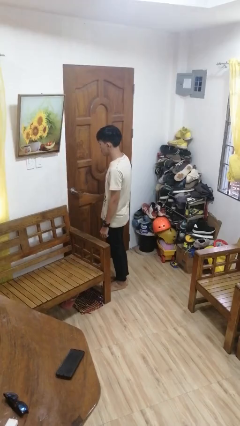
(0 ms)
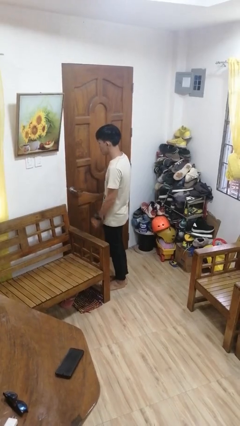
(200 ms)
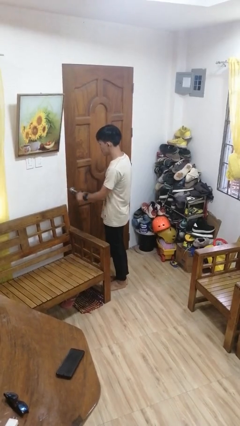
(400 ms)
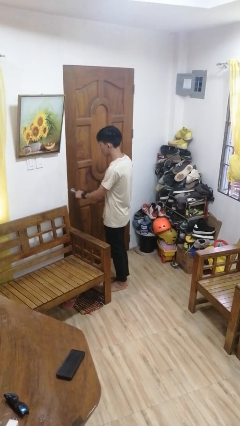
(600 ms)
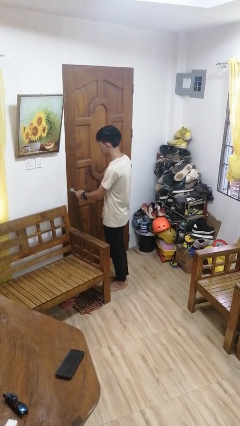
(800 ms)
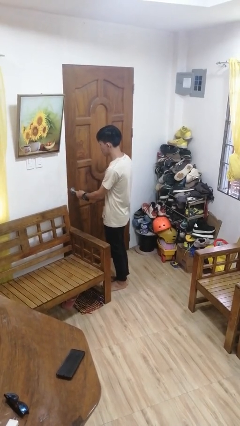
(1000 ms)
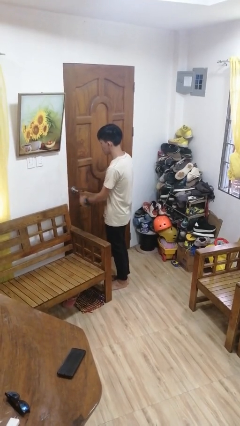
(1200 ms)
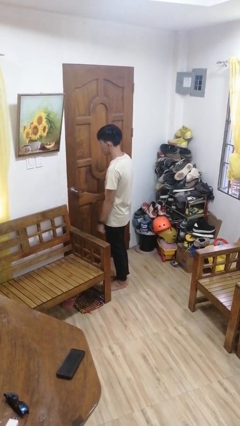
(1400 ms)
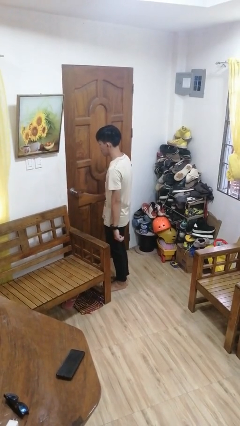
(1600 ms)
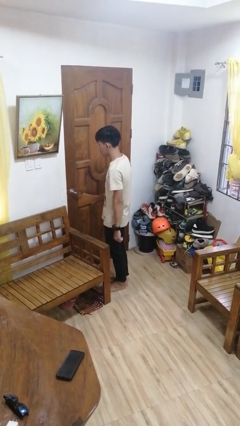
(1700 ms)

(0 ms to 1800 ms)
person locks door with keys

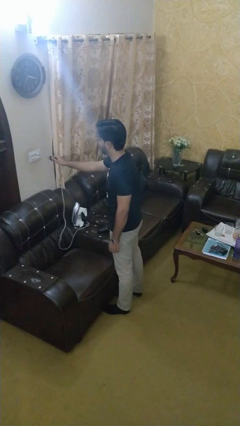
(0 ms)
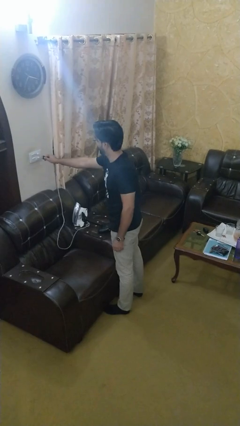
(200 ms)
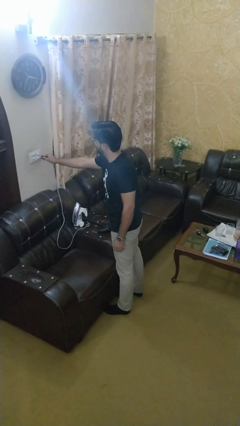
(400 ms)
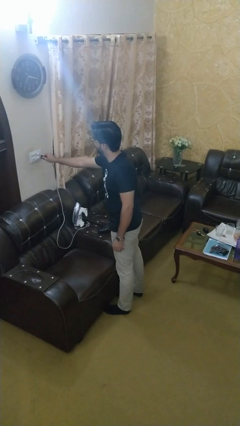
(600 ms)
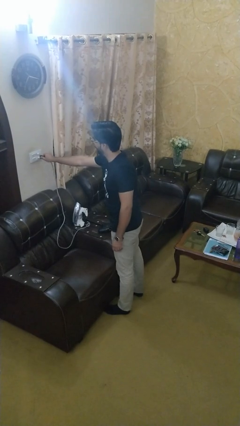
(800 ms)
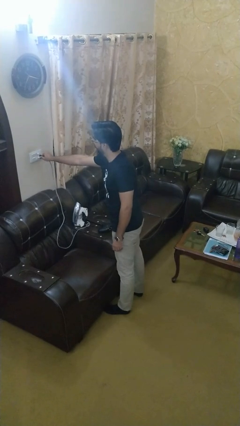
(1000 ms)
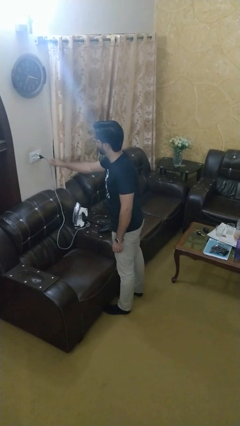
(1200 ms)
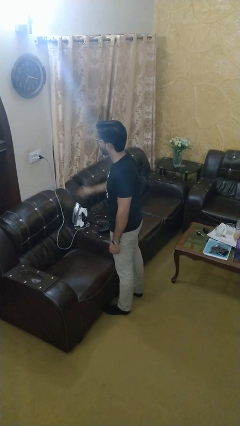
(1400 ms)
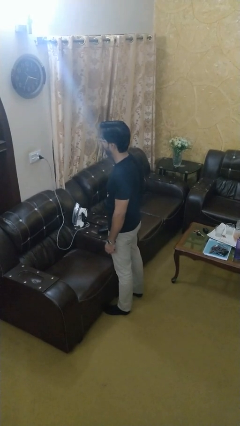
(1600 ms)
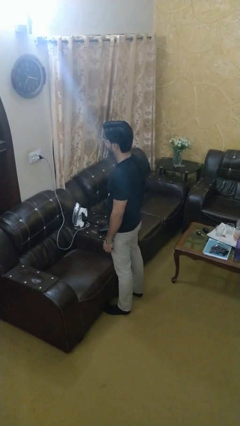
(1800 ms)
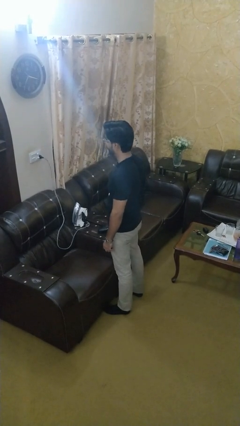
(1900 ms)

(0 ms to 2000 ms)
person plugs into electrical socket

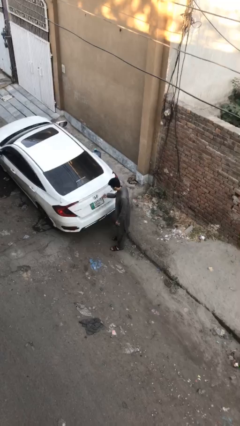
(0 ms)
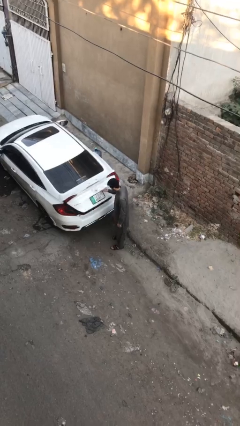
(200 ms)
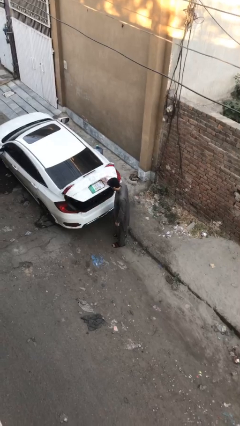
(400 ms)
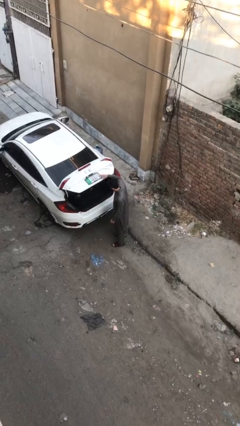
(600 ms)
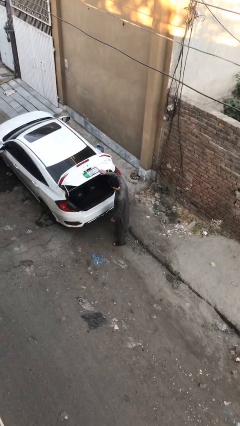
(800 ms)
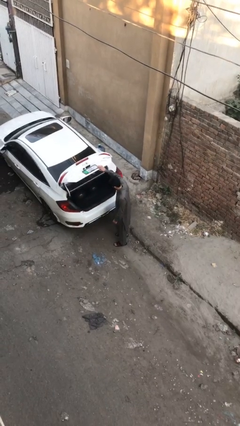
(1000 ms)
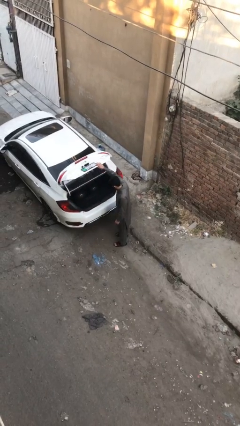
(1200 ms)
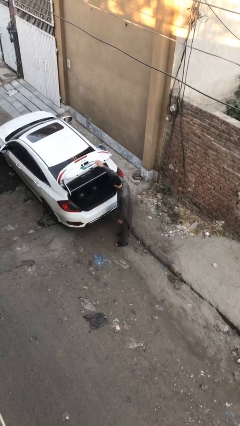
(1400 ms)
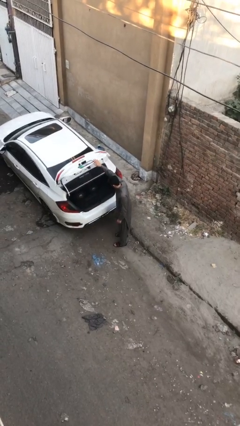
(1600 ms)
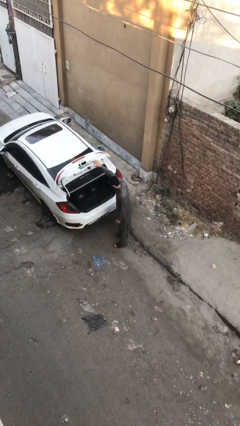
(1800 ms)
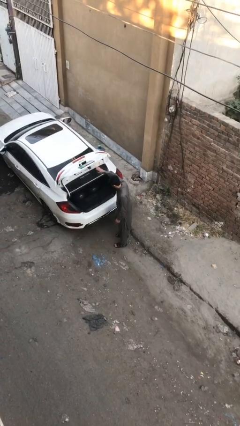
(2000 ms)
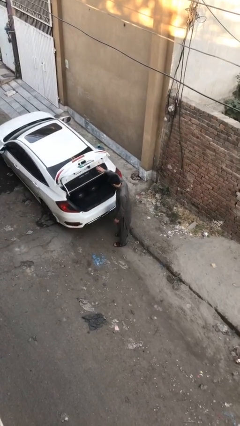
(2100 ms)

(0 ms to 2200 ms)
person opens car trunk

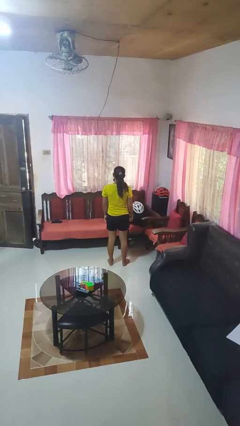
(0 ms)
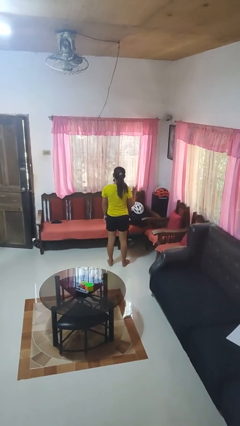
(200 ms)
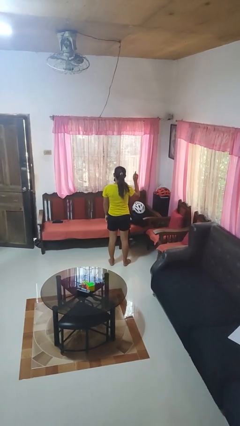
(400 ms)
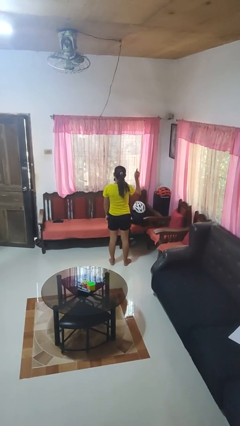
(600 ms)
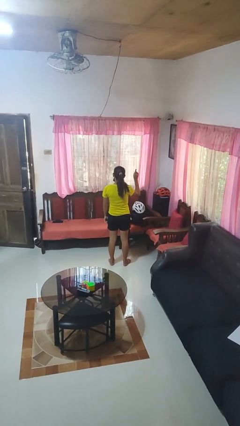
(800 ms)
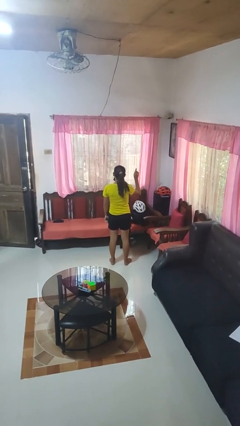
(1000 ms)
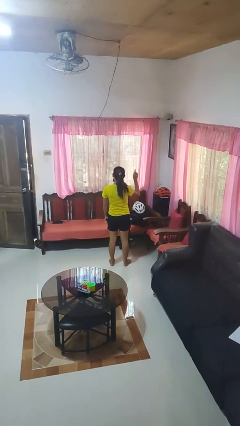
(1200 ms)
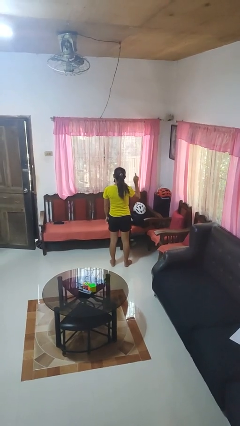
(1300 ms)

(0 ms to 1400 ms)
person gestures number one

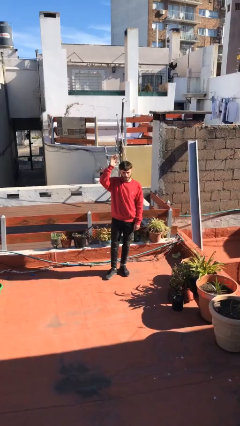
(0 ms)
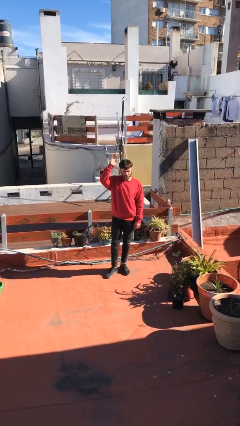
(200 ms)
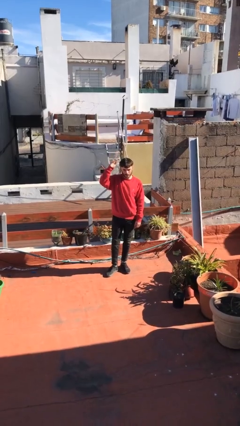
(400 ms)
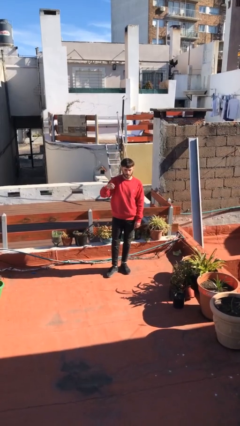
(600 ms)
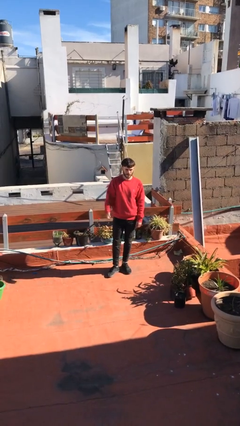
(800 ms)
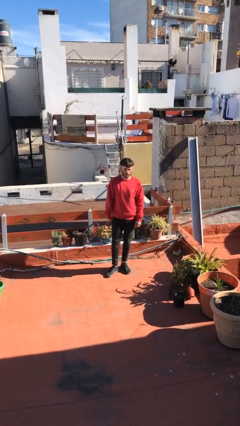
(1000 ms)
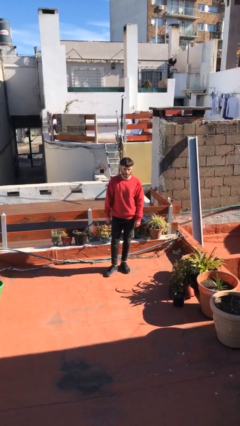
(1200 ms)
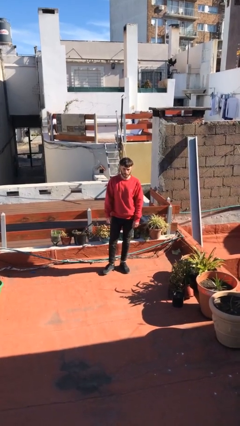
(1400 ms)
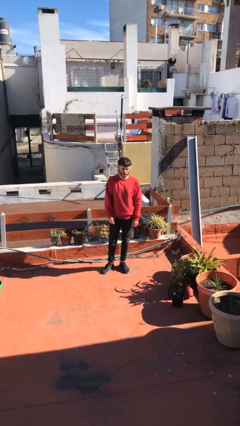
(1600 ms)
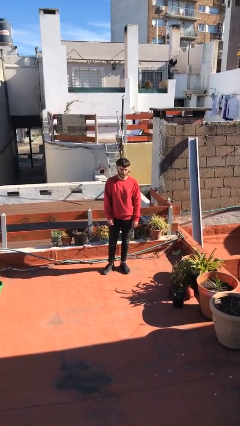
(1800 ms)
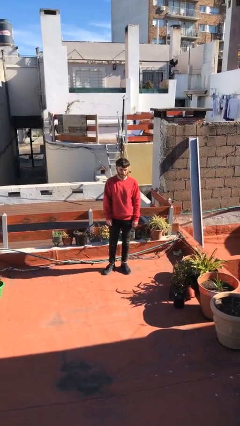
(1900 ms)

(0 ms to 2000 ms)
person gestures lower hand

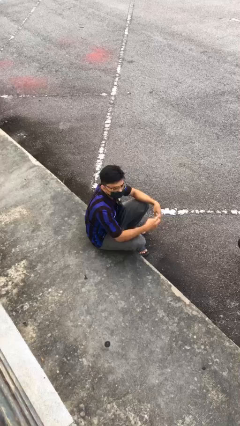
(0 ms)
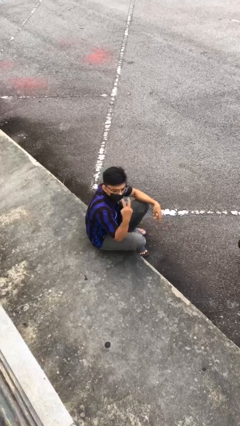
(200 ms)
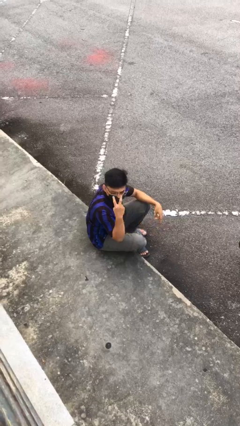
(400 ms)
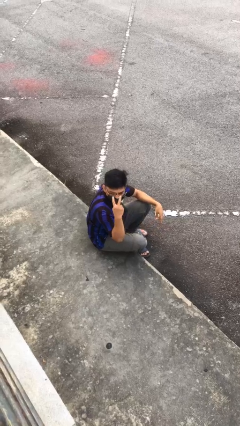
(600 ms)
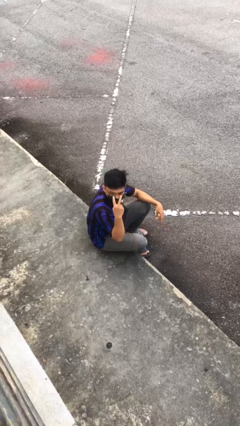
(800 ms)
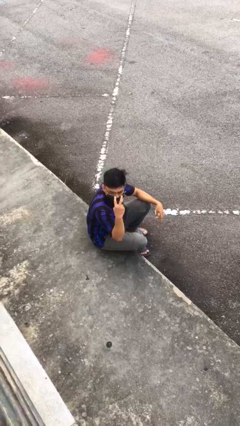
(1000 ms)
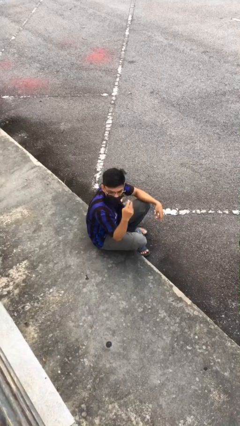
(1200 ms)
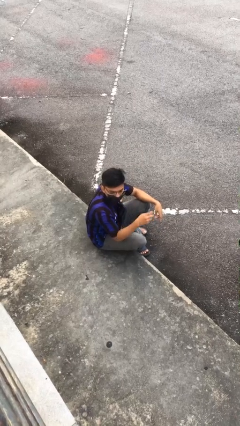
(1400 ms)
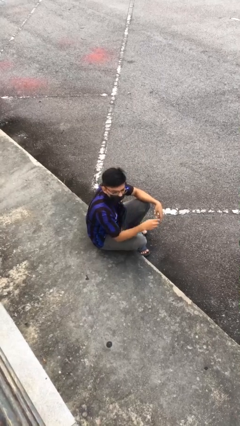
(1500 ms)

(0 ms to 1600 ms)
person gestures watch closely

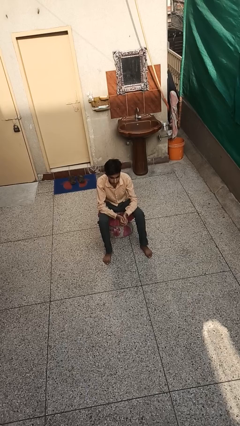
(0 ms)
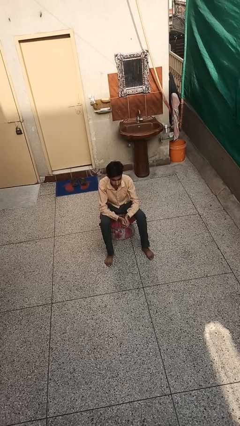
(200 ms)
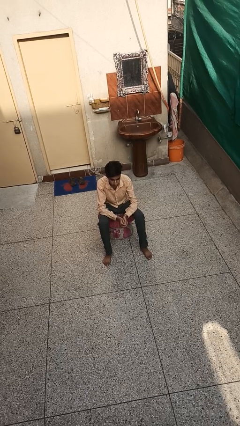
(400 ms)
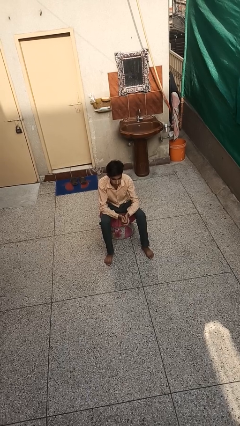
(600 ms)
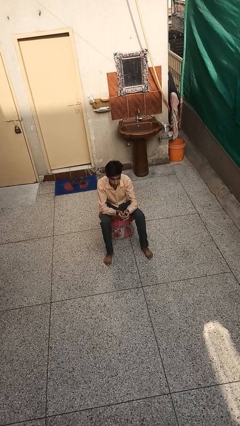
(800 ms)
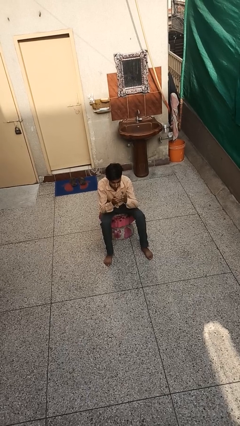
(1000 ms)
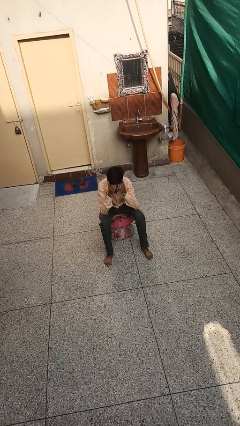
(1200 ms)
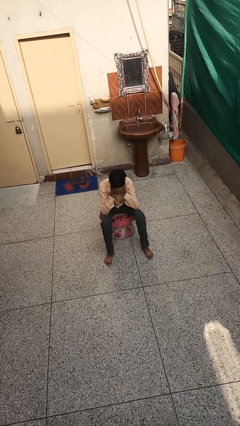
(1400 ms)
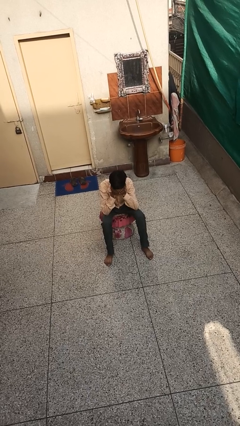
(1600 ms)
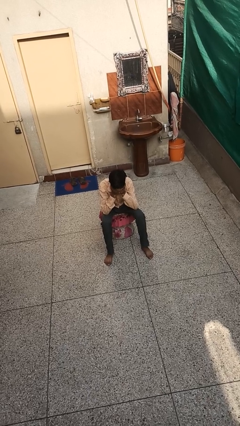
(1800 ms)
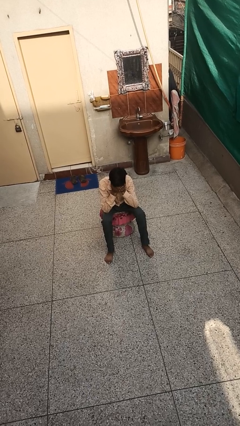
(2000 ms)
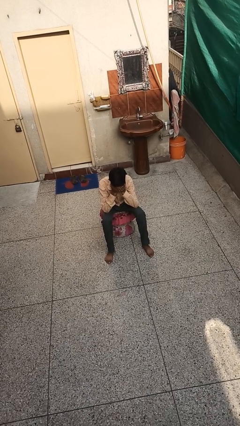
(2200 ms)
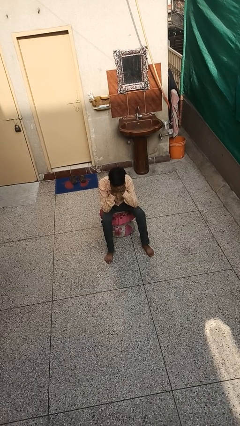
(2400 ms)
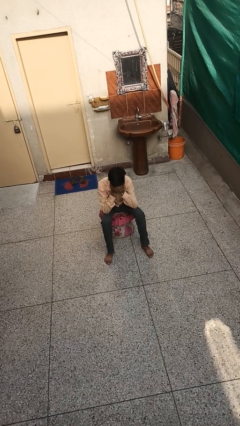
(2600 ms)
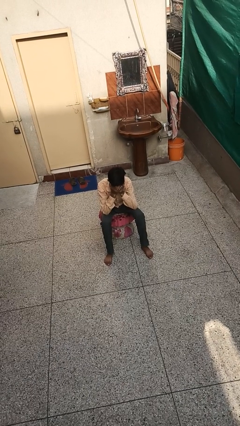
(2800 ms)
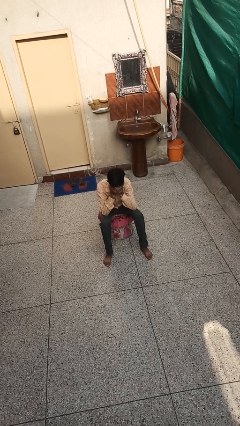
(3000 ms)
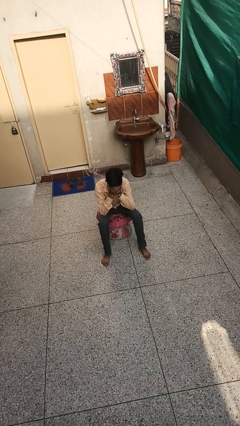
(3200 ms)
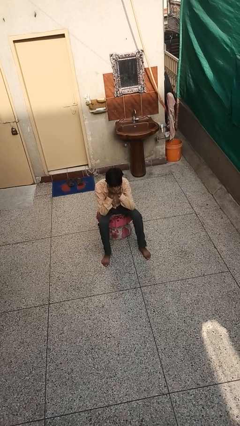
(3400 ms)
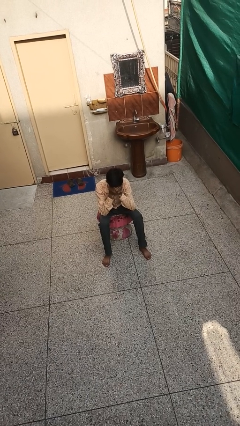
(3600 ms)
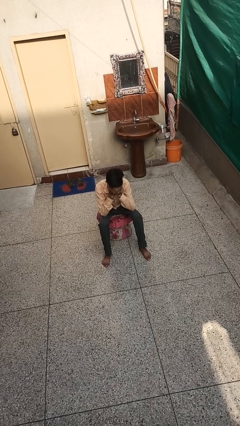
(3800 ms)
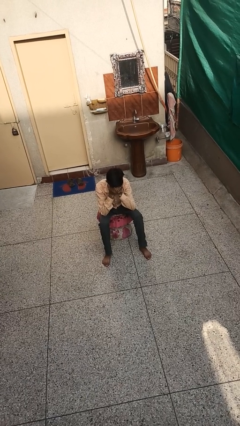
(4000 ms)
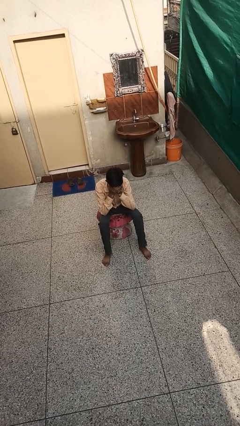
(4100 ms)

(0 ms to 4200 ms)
person covers face with hands

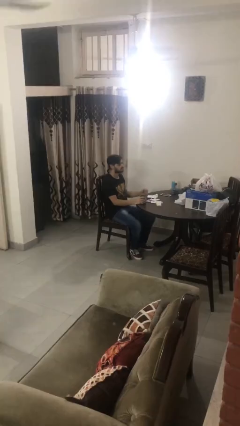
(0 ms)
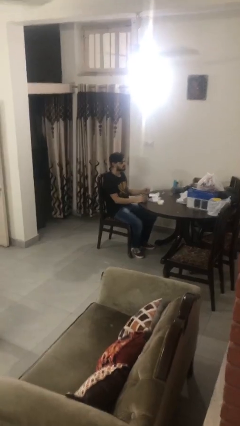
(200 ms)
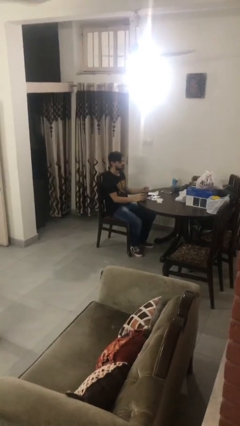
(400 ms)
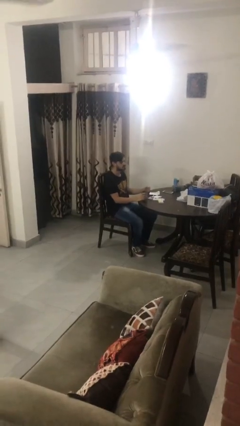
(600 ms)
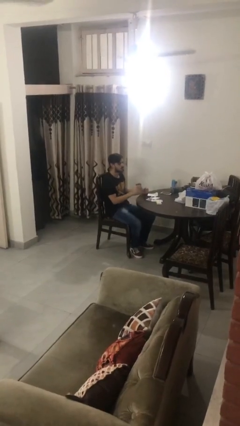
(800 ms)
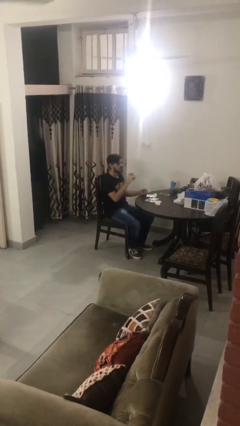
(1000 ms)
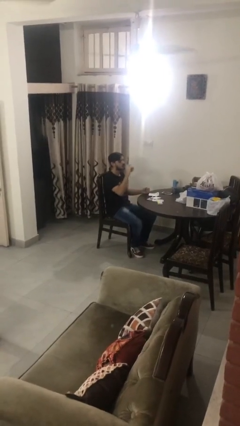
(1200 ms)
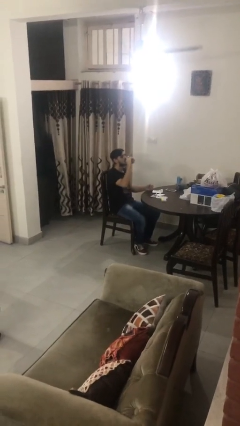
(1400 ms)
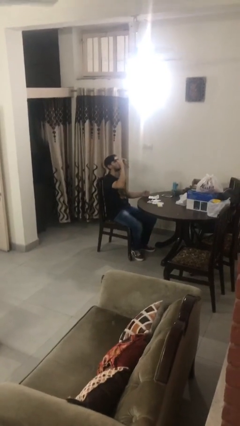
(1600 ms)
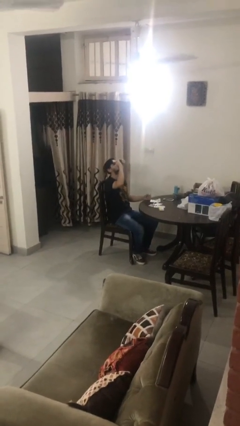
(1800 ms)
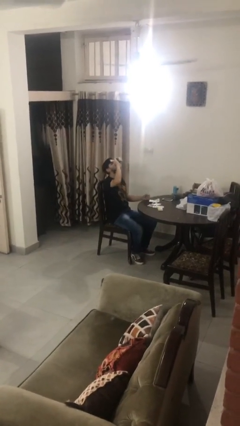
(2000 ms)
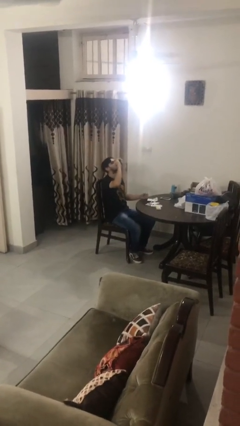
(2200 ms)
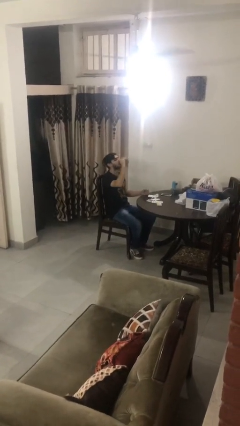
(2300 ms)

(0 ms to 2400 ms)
person drinks from cup
